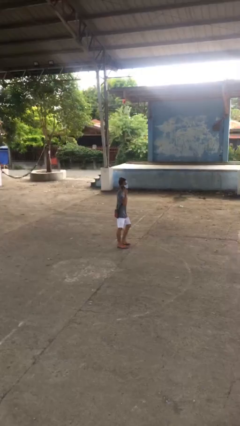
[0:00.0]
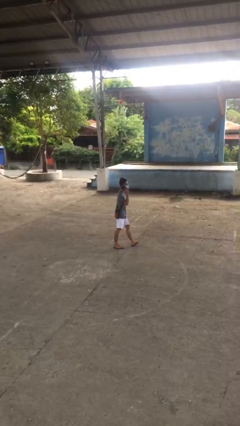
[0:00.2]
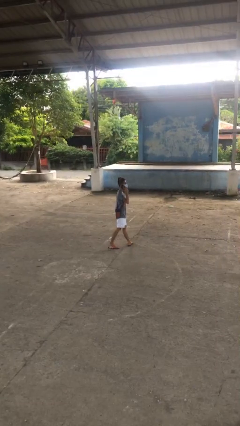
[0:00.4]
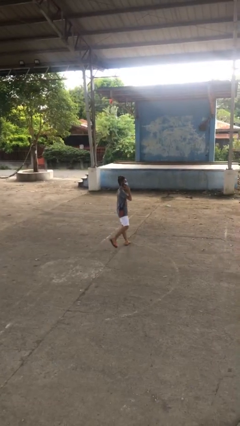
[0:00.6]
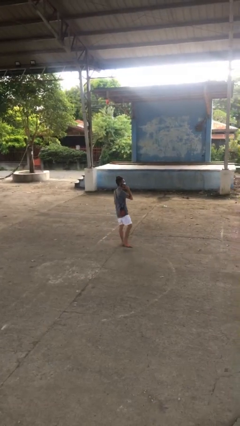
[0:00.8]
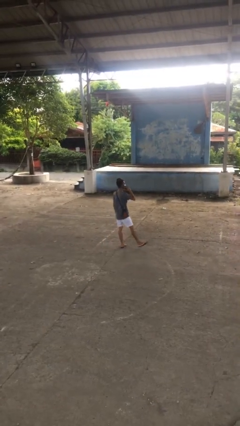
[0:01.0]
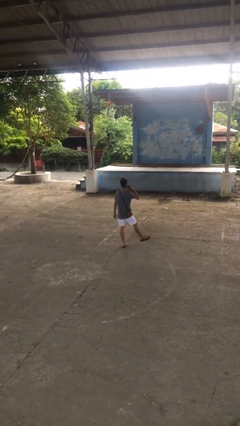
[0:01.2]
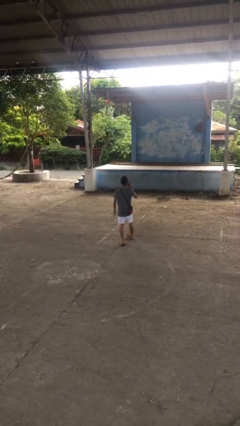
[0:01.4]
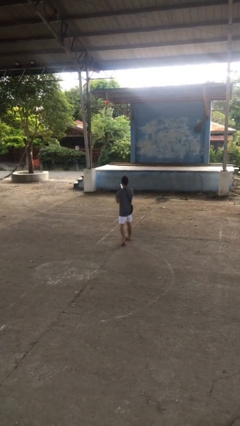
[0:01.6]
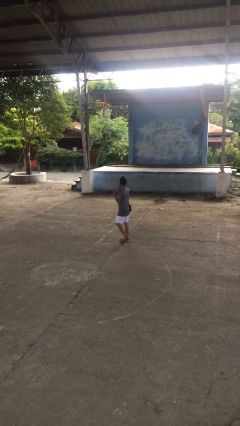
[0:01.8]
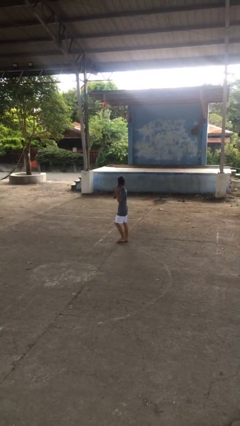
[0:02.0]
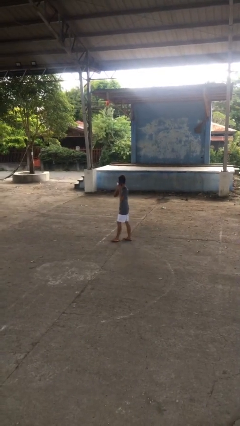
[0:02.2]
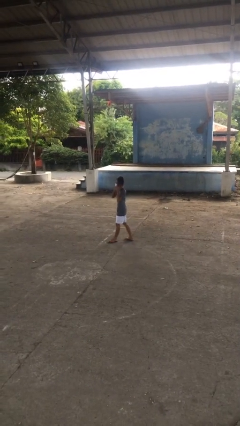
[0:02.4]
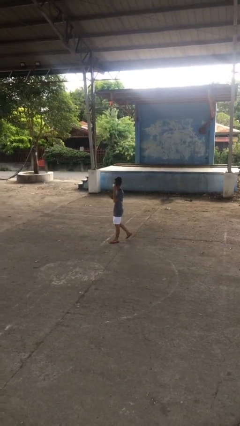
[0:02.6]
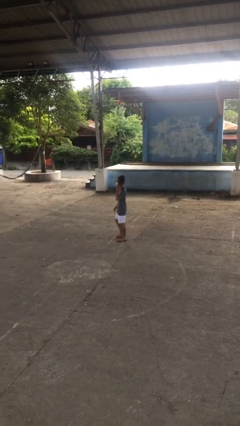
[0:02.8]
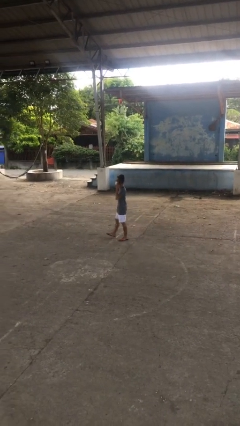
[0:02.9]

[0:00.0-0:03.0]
person talks on phone

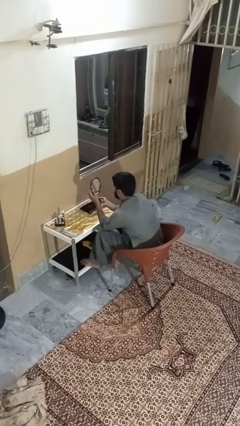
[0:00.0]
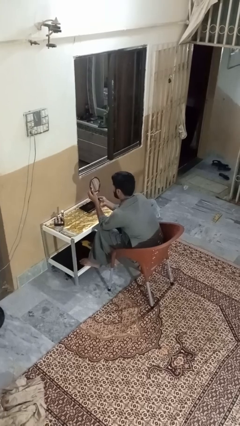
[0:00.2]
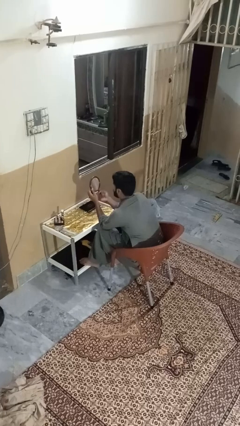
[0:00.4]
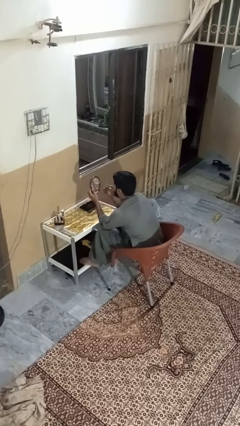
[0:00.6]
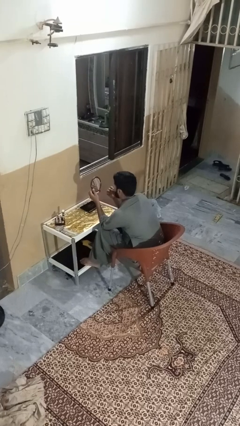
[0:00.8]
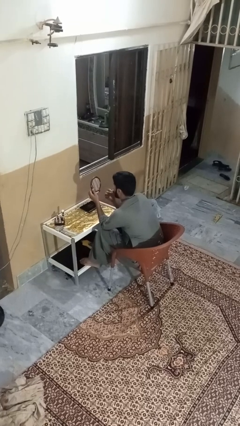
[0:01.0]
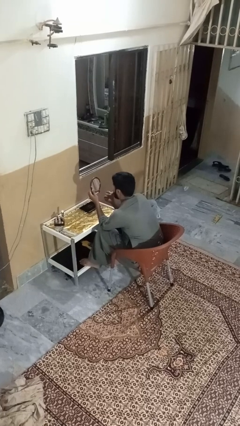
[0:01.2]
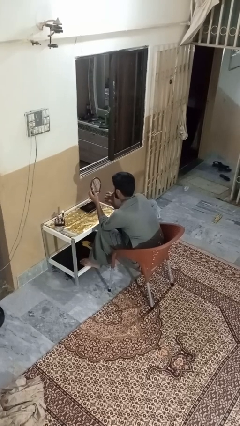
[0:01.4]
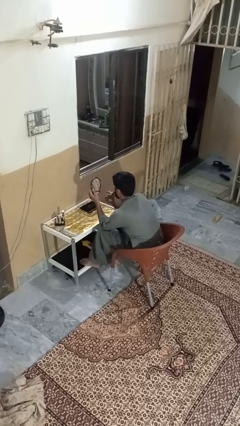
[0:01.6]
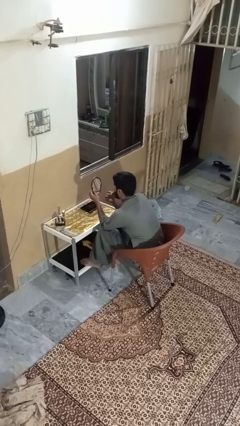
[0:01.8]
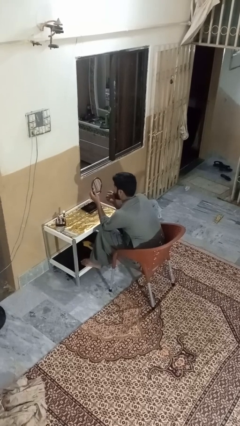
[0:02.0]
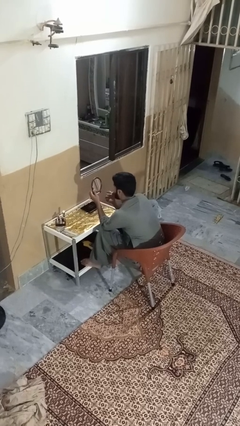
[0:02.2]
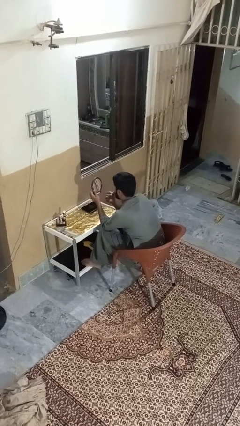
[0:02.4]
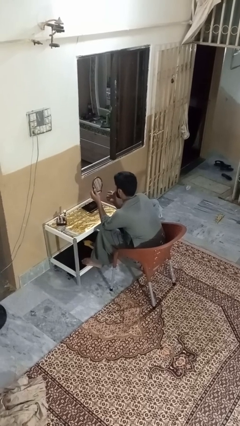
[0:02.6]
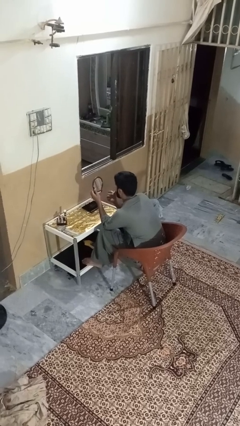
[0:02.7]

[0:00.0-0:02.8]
person applies lip makeup

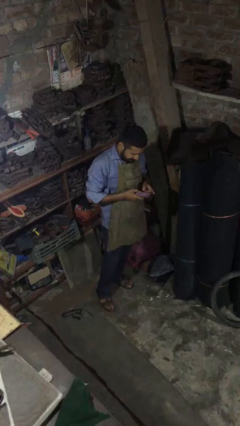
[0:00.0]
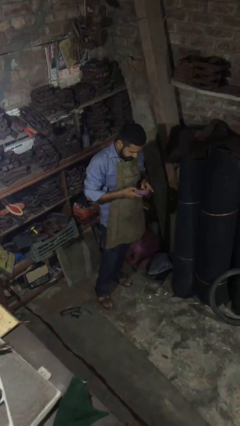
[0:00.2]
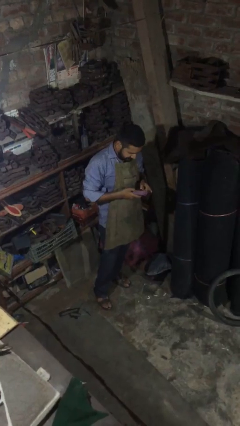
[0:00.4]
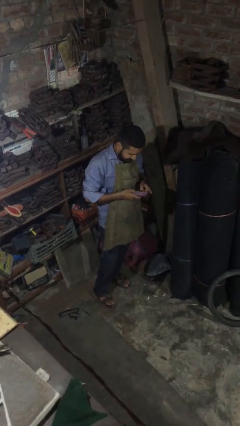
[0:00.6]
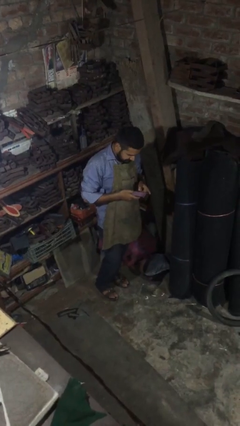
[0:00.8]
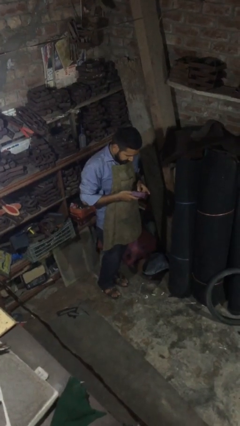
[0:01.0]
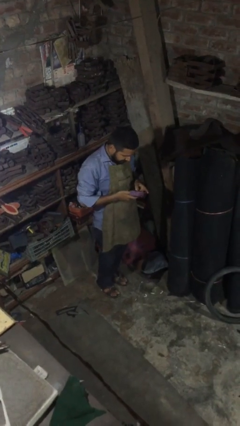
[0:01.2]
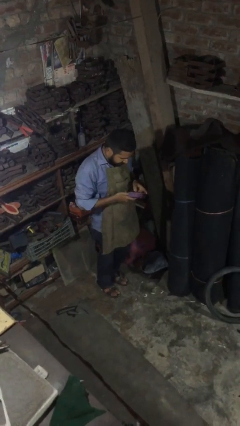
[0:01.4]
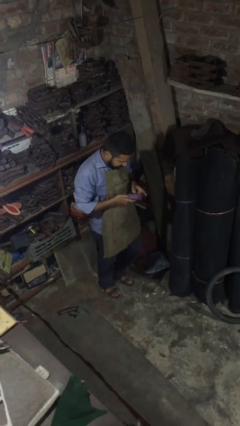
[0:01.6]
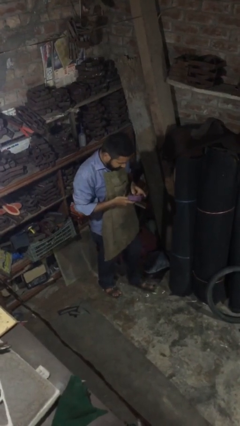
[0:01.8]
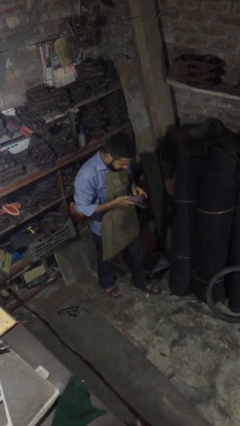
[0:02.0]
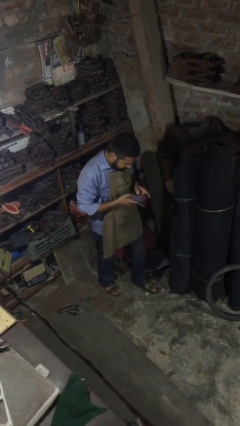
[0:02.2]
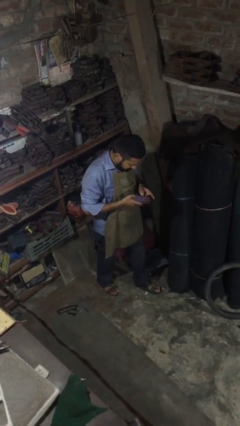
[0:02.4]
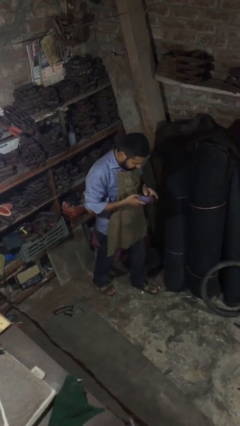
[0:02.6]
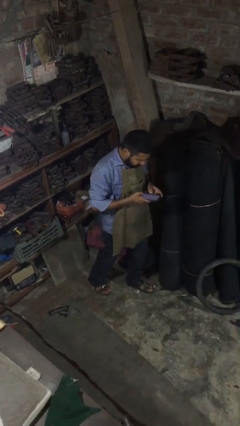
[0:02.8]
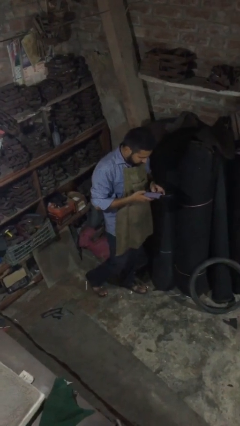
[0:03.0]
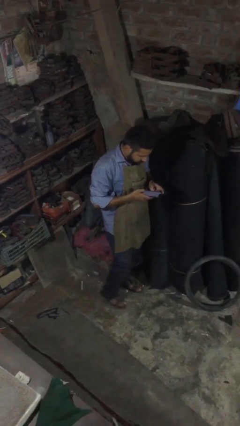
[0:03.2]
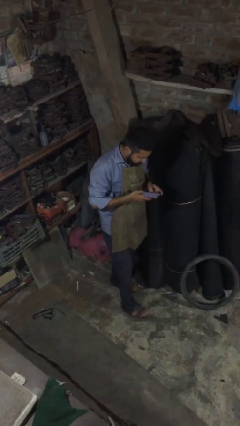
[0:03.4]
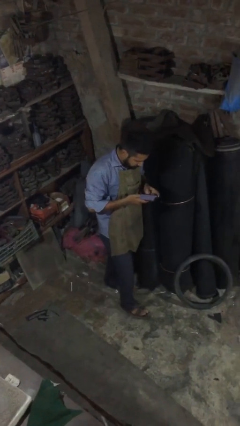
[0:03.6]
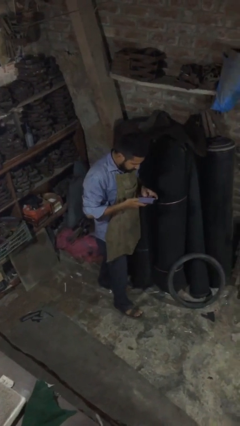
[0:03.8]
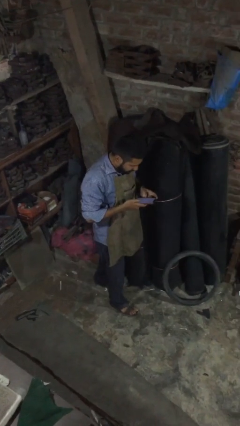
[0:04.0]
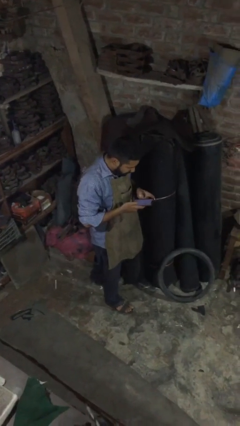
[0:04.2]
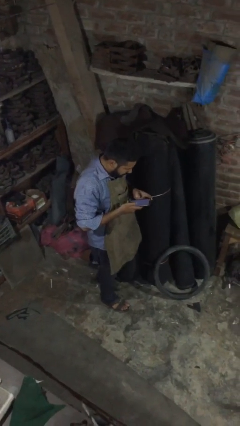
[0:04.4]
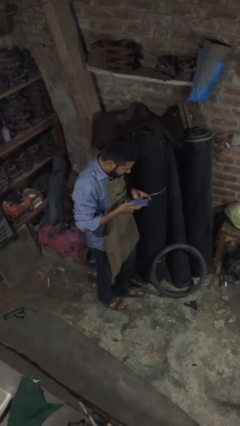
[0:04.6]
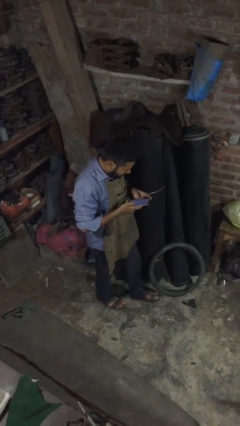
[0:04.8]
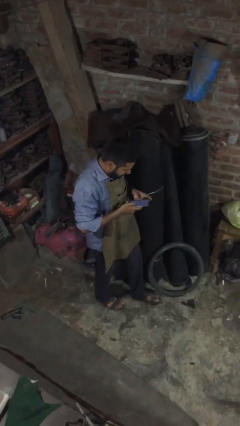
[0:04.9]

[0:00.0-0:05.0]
person texts on phone

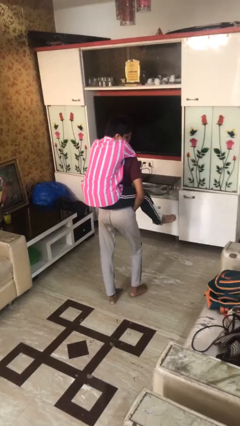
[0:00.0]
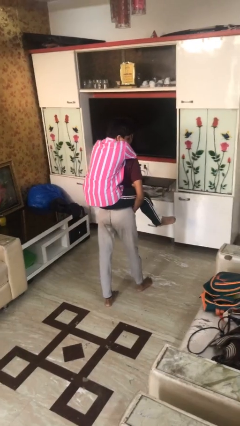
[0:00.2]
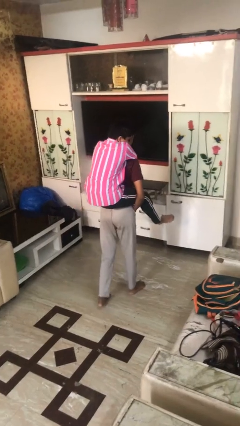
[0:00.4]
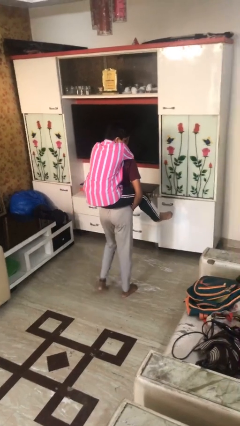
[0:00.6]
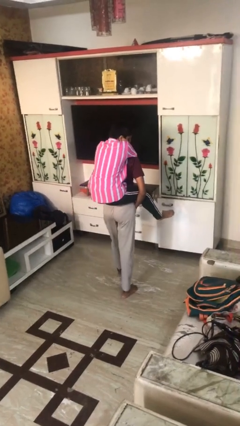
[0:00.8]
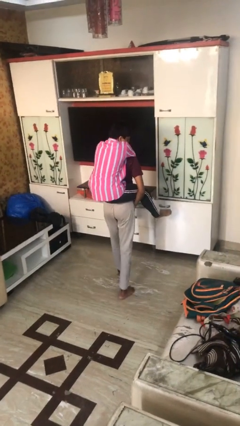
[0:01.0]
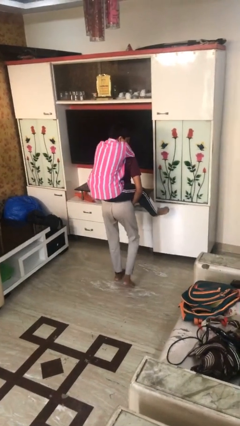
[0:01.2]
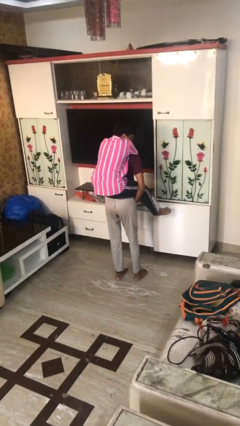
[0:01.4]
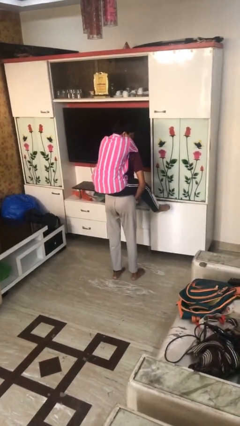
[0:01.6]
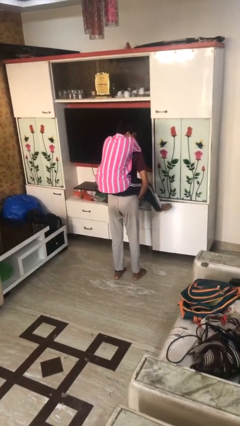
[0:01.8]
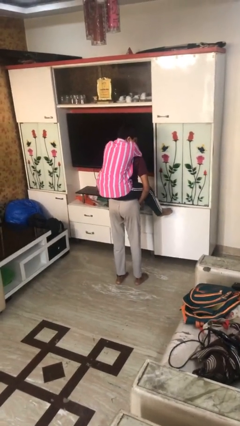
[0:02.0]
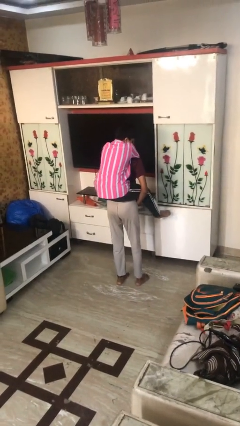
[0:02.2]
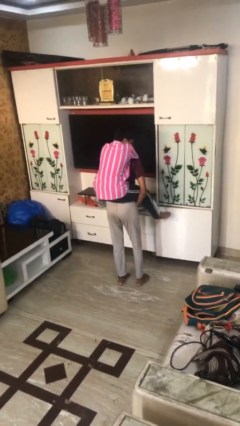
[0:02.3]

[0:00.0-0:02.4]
person carries person on back

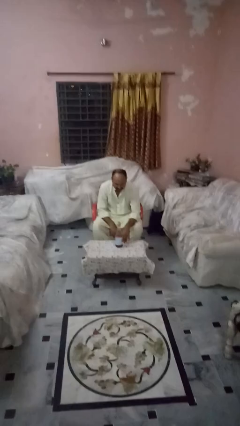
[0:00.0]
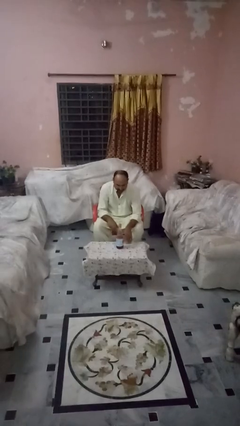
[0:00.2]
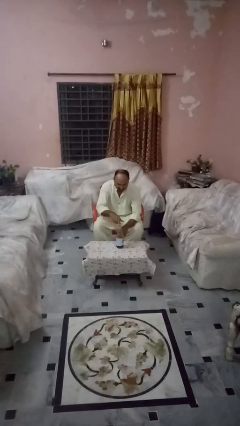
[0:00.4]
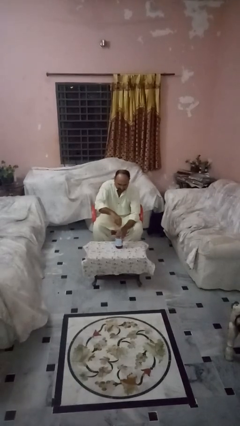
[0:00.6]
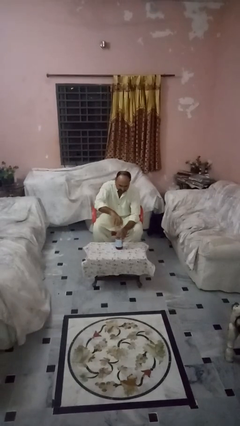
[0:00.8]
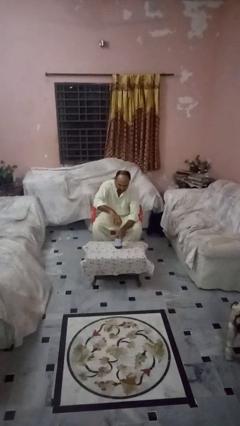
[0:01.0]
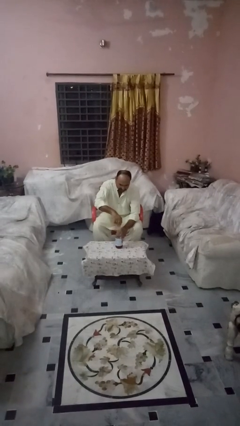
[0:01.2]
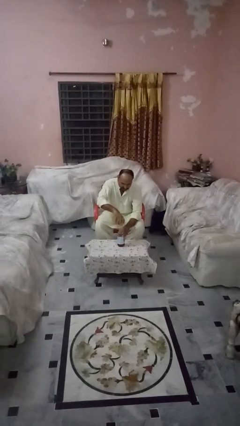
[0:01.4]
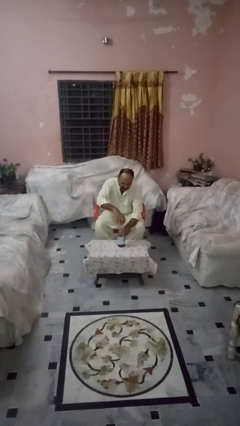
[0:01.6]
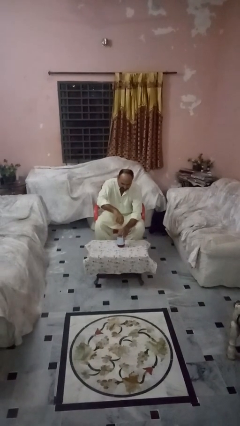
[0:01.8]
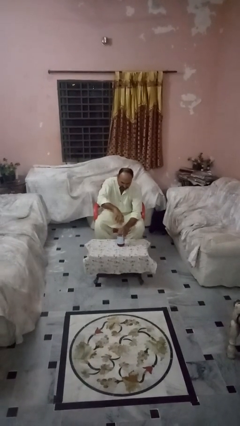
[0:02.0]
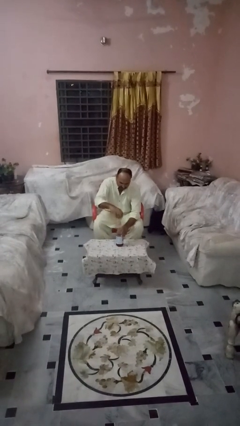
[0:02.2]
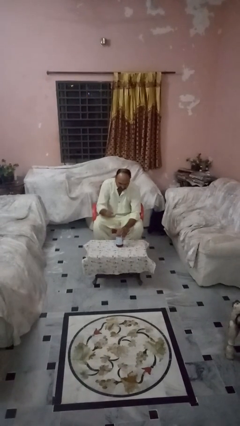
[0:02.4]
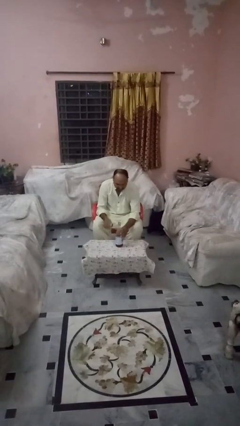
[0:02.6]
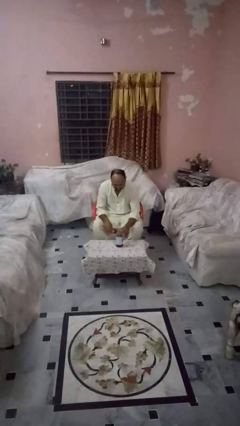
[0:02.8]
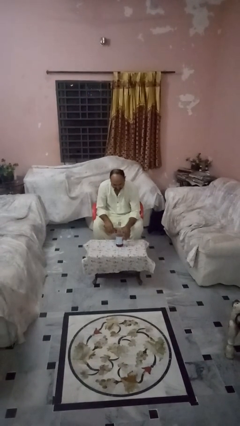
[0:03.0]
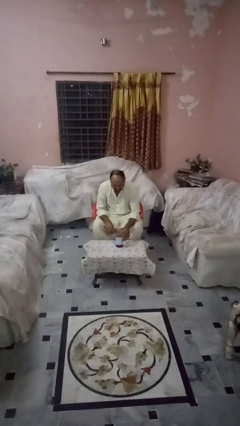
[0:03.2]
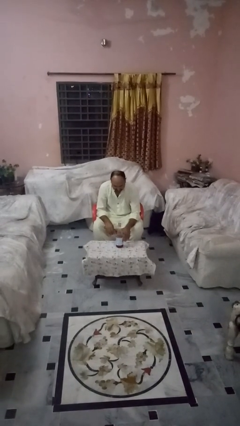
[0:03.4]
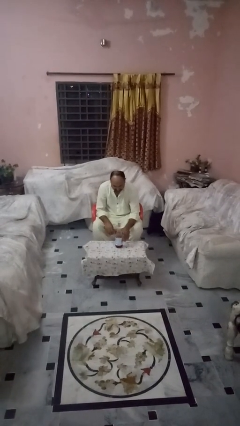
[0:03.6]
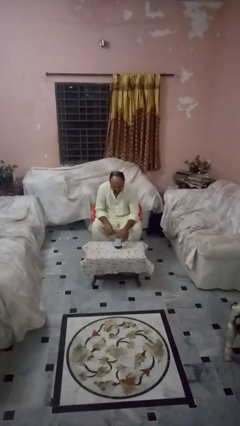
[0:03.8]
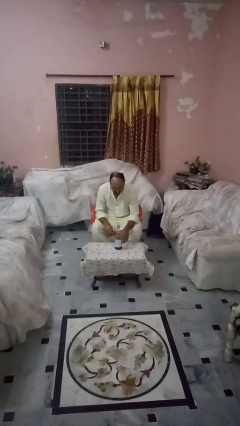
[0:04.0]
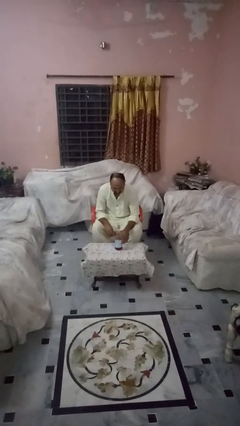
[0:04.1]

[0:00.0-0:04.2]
person unscrews lid from bottle

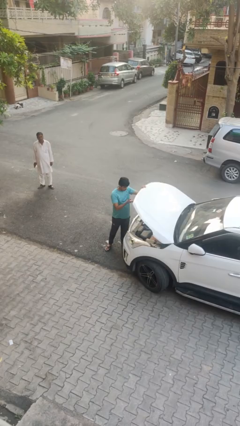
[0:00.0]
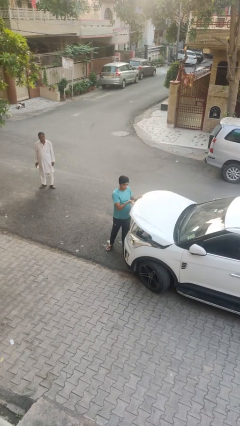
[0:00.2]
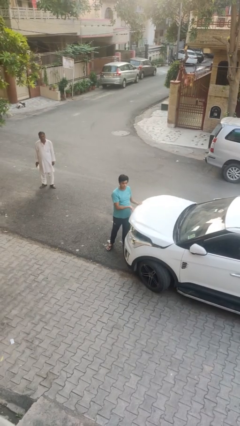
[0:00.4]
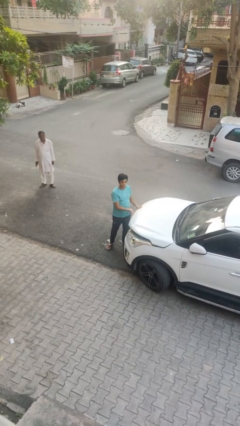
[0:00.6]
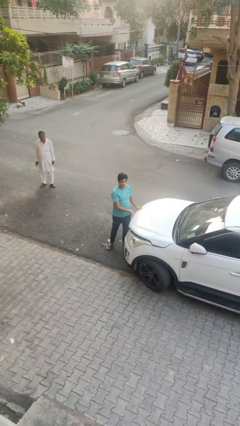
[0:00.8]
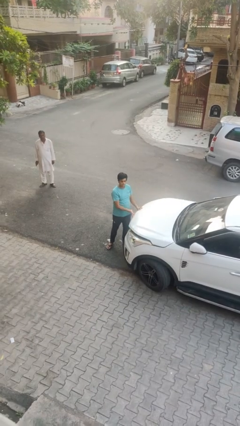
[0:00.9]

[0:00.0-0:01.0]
person closes car hood
